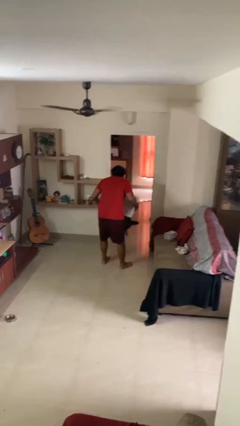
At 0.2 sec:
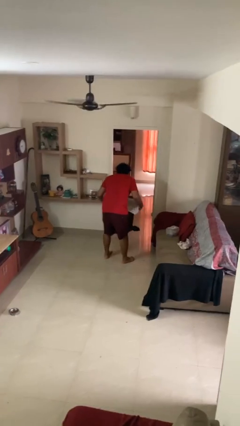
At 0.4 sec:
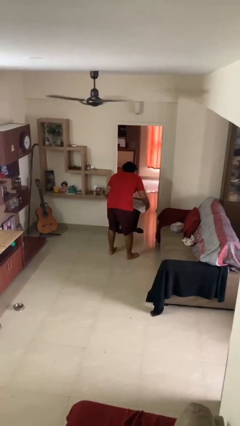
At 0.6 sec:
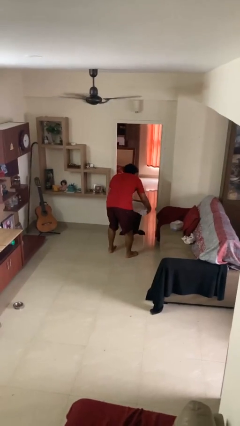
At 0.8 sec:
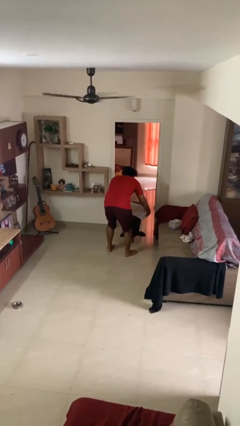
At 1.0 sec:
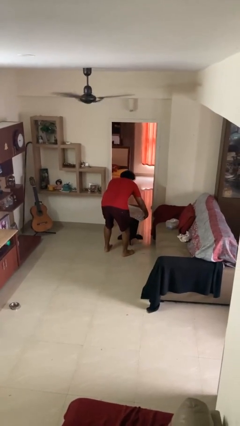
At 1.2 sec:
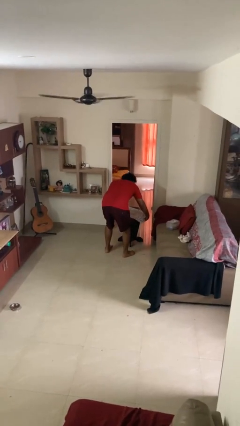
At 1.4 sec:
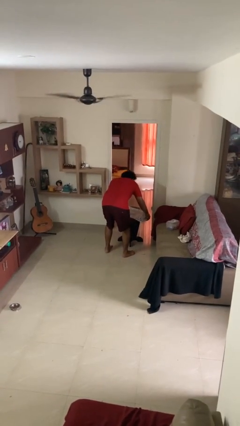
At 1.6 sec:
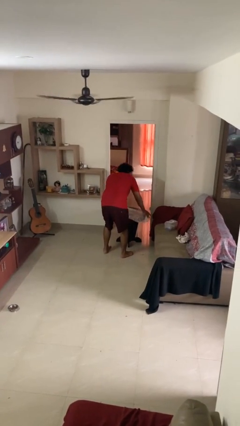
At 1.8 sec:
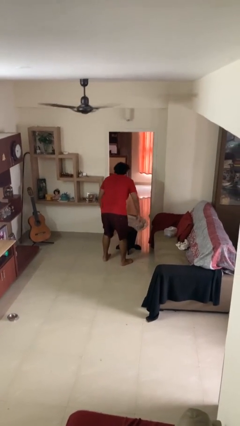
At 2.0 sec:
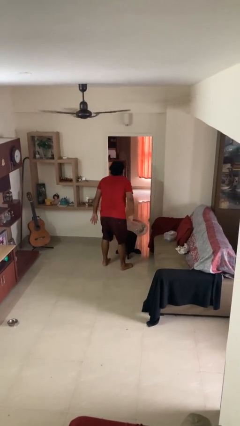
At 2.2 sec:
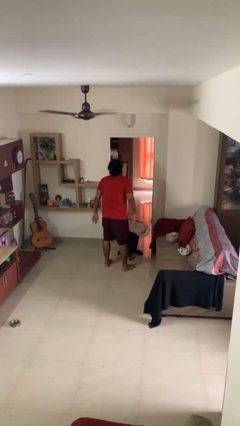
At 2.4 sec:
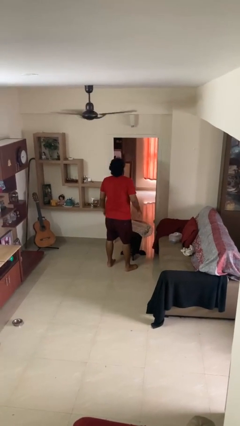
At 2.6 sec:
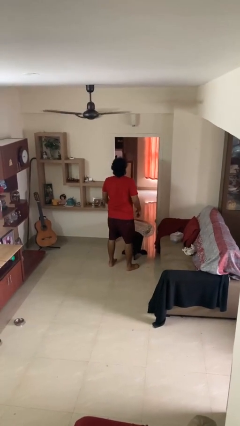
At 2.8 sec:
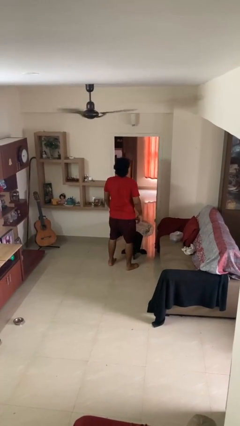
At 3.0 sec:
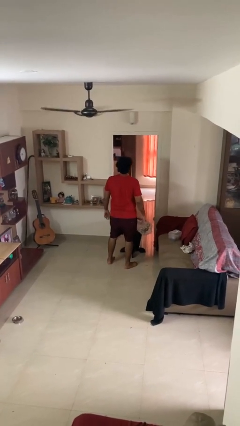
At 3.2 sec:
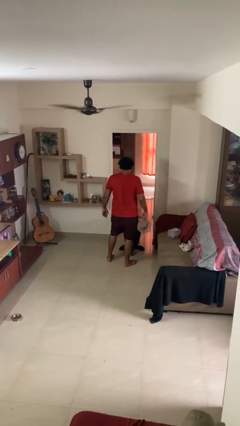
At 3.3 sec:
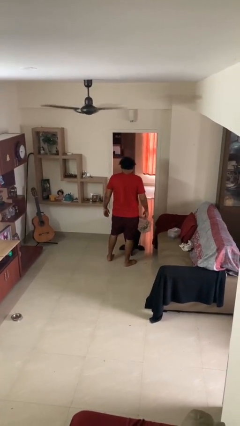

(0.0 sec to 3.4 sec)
person puts down object on floor

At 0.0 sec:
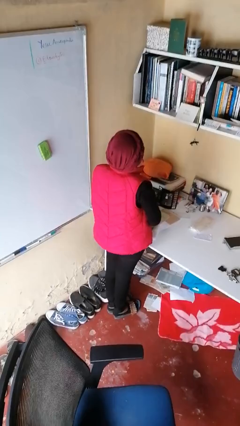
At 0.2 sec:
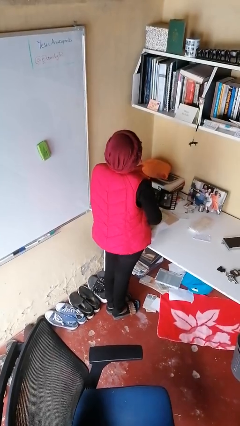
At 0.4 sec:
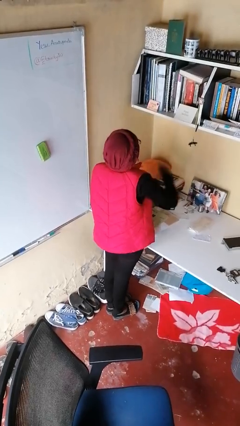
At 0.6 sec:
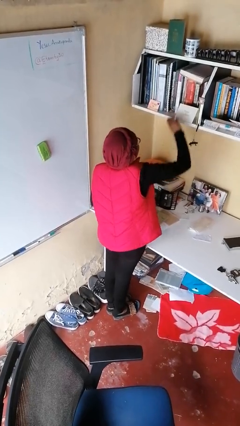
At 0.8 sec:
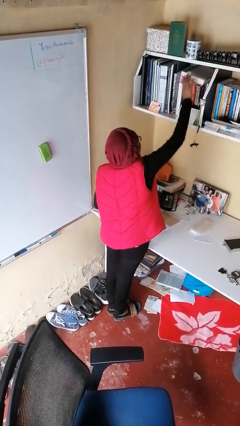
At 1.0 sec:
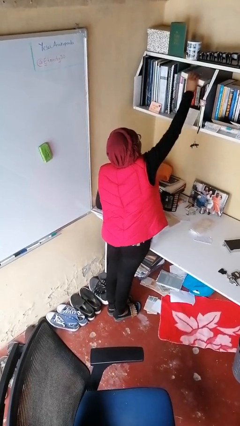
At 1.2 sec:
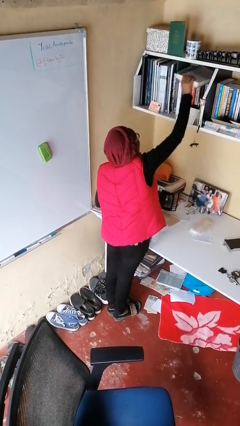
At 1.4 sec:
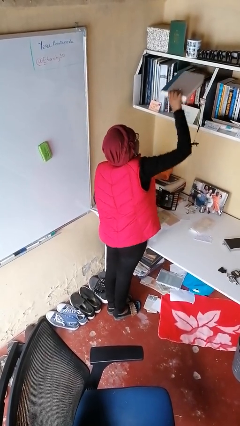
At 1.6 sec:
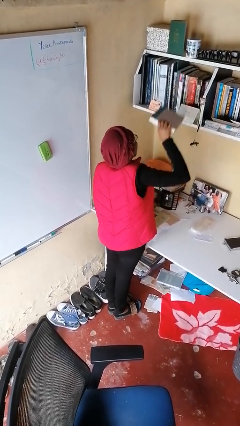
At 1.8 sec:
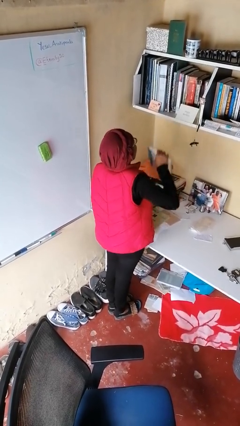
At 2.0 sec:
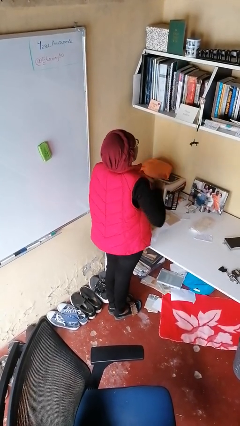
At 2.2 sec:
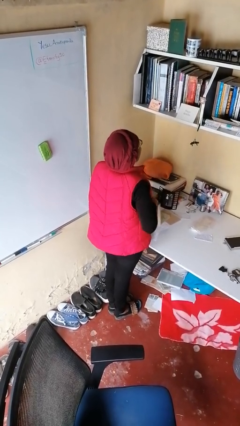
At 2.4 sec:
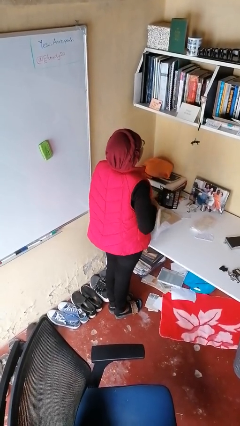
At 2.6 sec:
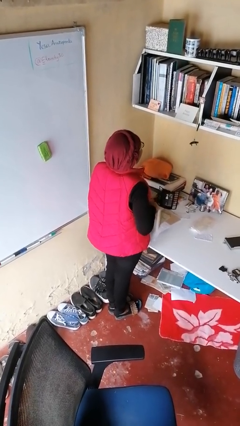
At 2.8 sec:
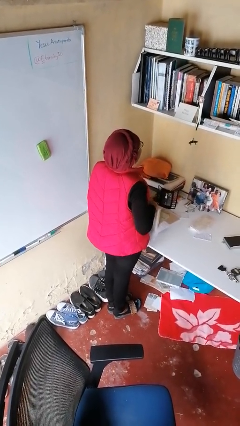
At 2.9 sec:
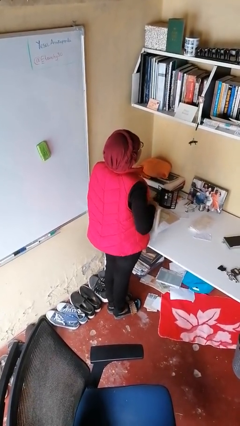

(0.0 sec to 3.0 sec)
person picks up object from shelf

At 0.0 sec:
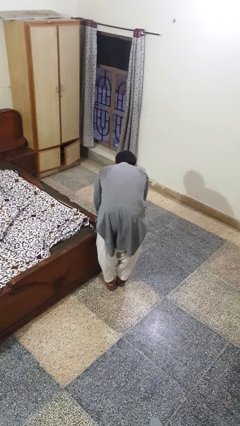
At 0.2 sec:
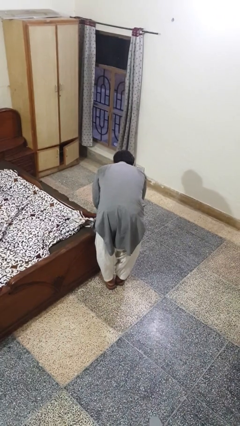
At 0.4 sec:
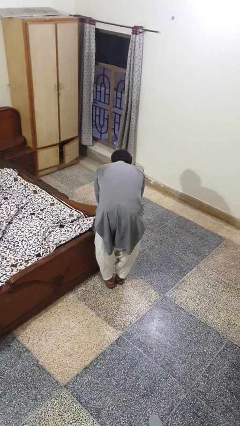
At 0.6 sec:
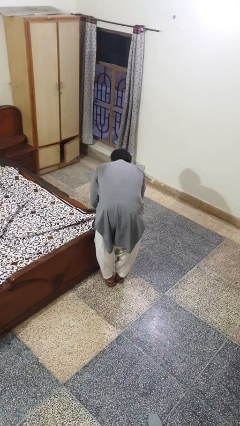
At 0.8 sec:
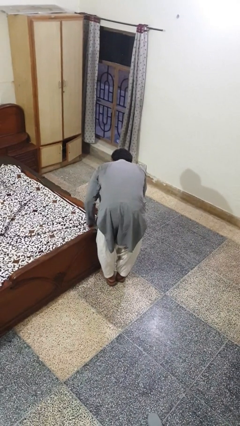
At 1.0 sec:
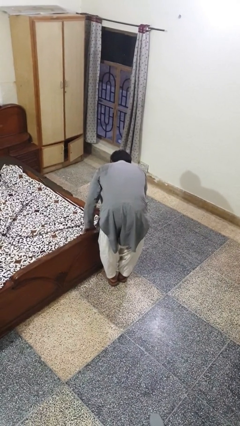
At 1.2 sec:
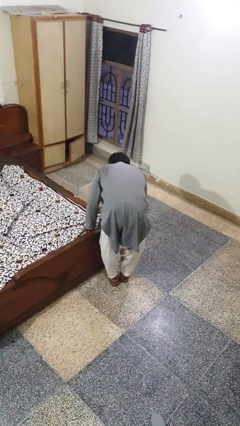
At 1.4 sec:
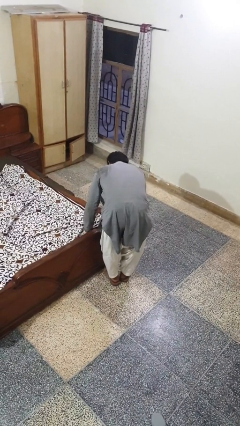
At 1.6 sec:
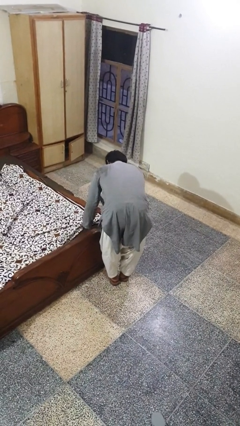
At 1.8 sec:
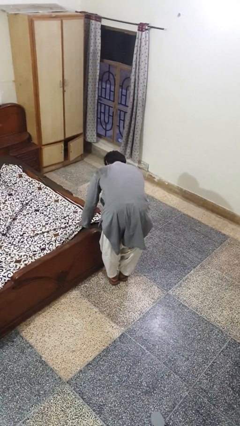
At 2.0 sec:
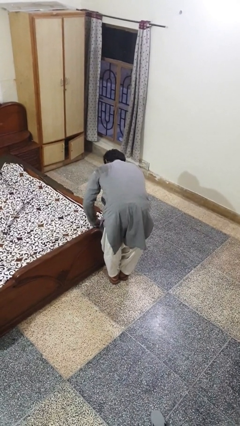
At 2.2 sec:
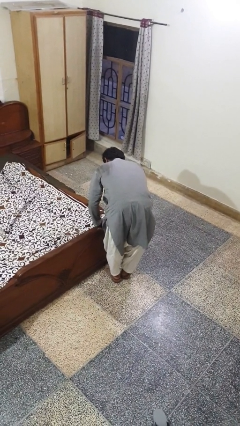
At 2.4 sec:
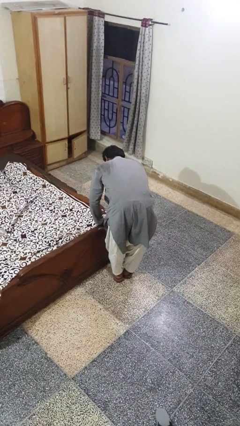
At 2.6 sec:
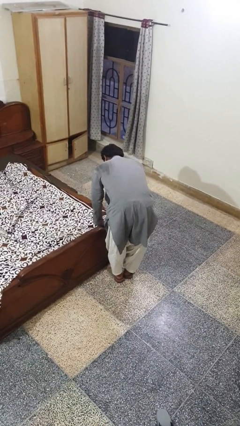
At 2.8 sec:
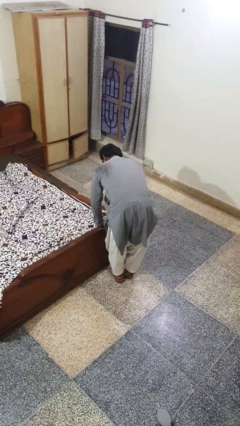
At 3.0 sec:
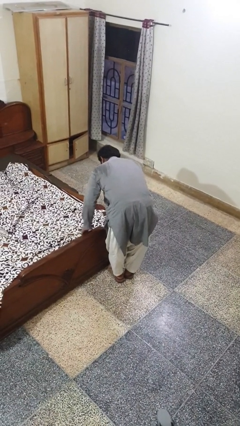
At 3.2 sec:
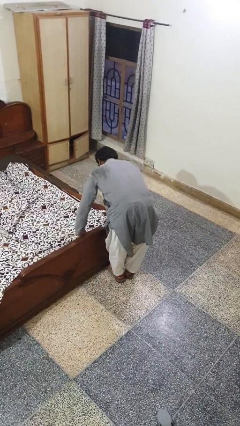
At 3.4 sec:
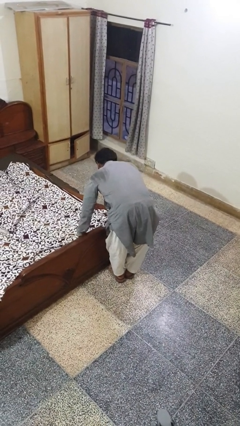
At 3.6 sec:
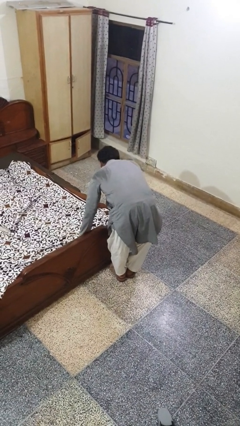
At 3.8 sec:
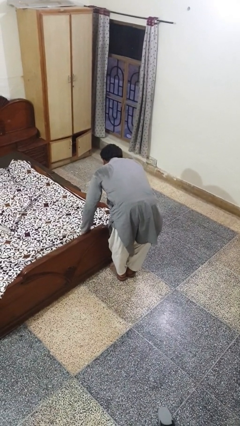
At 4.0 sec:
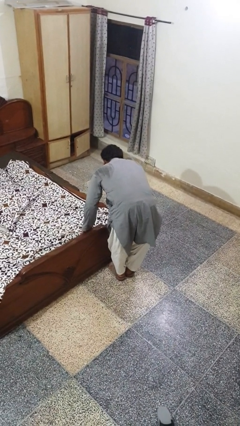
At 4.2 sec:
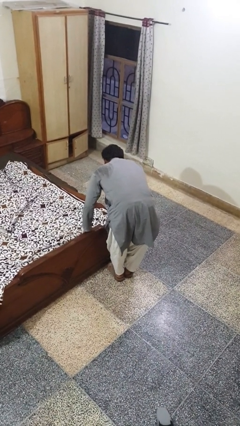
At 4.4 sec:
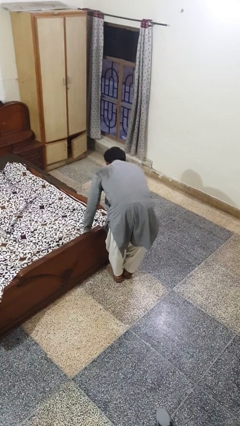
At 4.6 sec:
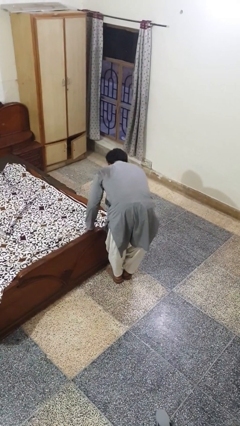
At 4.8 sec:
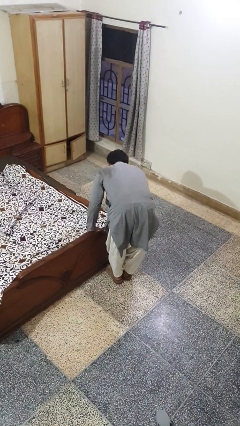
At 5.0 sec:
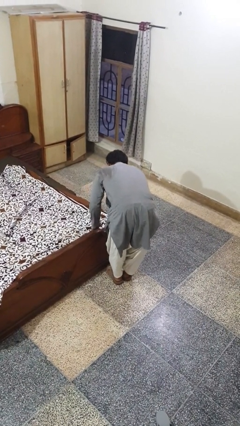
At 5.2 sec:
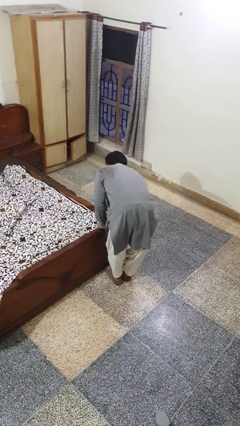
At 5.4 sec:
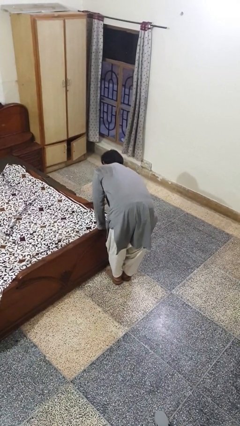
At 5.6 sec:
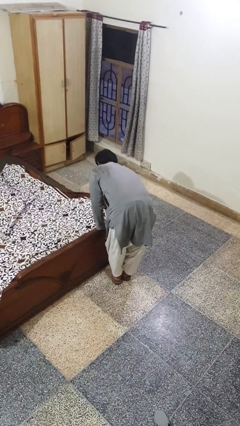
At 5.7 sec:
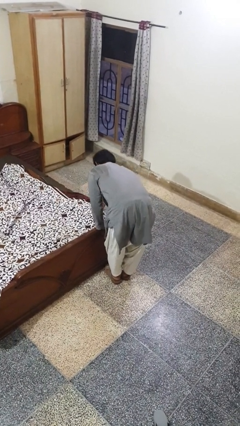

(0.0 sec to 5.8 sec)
person makes bed

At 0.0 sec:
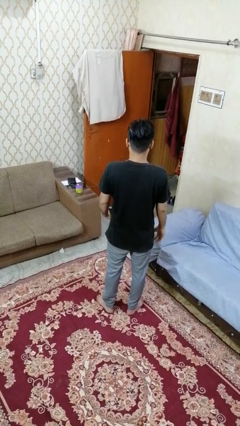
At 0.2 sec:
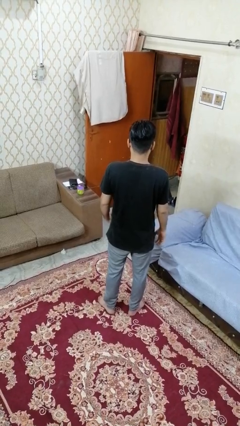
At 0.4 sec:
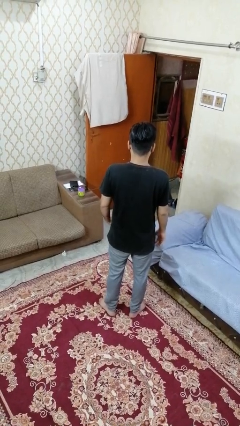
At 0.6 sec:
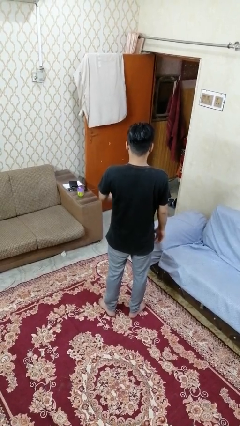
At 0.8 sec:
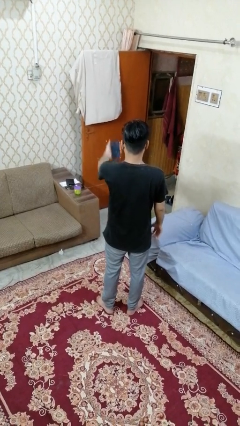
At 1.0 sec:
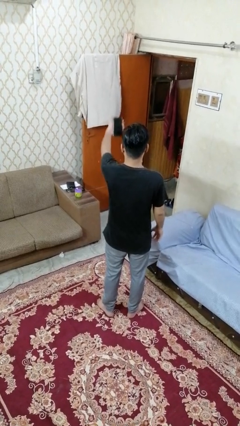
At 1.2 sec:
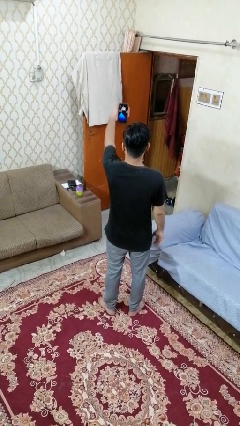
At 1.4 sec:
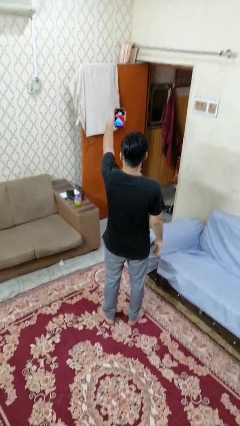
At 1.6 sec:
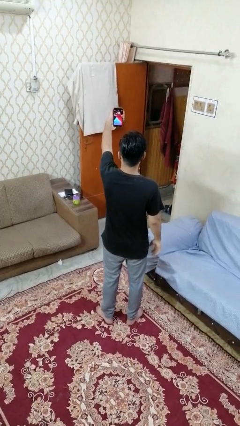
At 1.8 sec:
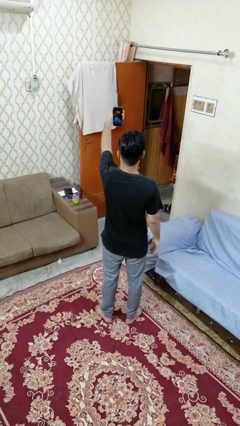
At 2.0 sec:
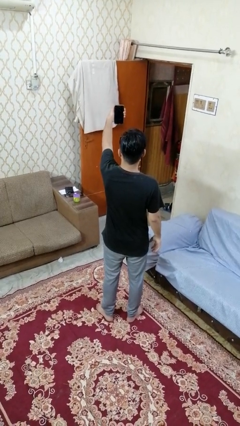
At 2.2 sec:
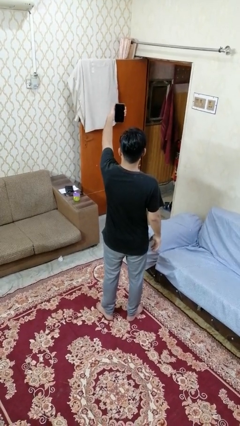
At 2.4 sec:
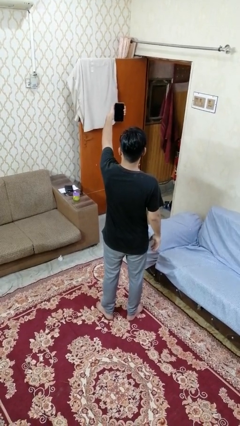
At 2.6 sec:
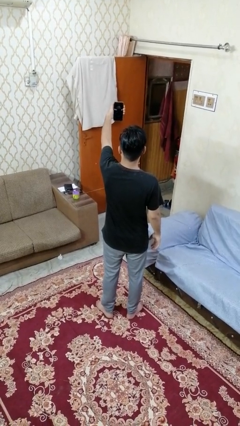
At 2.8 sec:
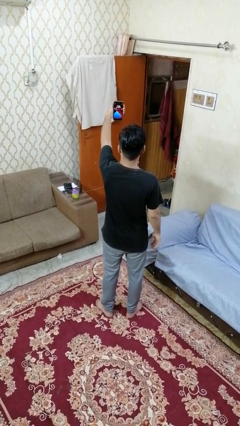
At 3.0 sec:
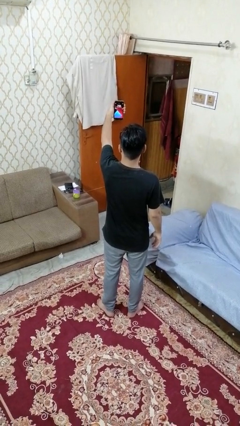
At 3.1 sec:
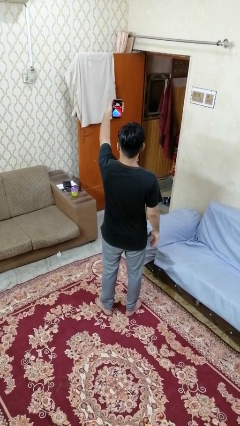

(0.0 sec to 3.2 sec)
person takes selfie

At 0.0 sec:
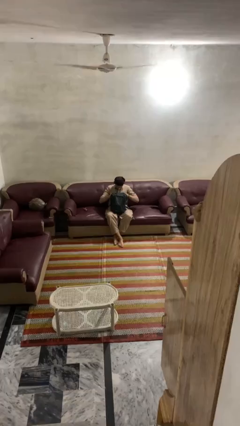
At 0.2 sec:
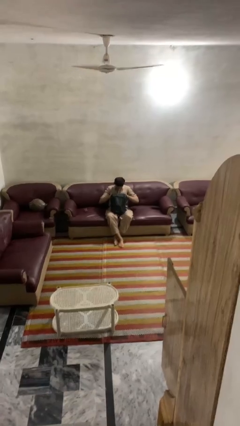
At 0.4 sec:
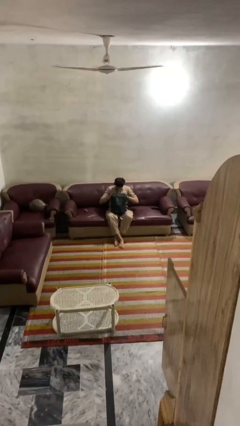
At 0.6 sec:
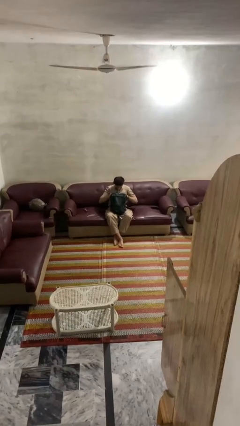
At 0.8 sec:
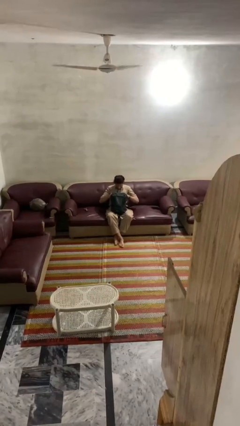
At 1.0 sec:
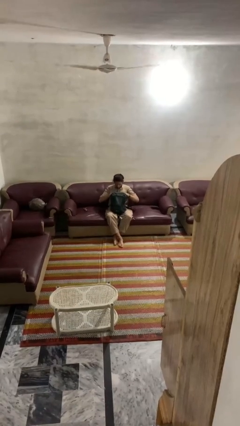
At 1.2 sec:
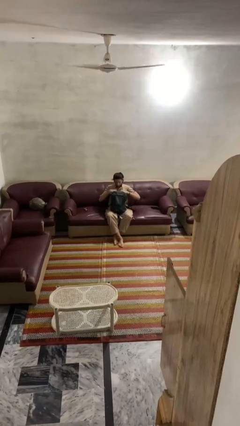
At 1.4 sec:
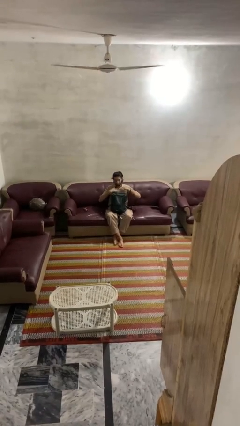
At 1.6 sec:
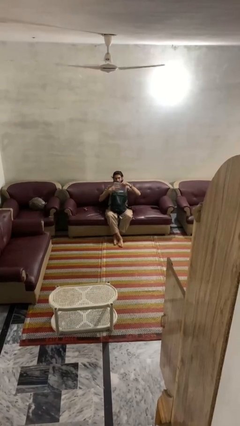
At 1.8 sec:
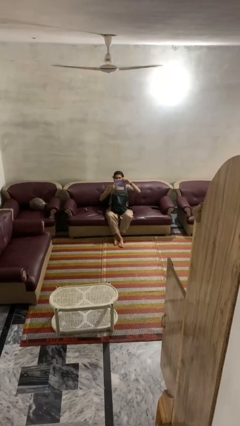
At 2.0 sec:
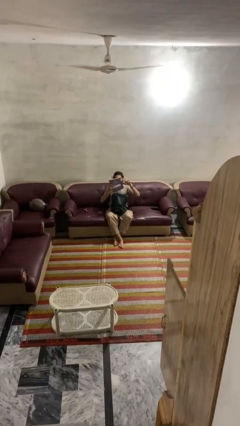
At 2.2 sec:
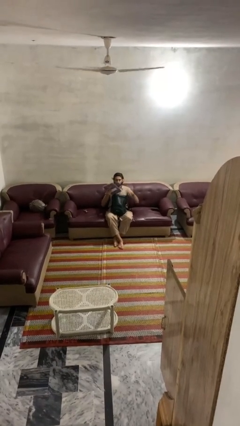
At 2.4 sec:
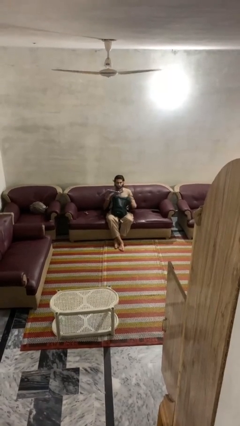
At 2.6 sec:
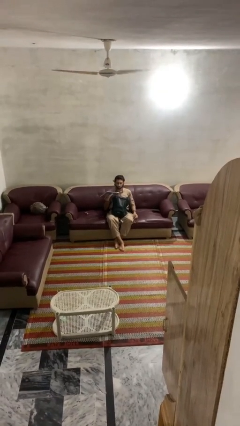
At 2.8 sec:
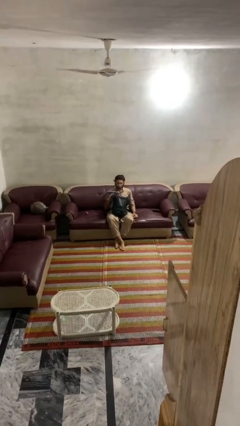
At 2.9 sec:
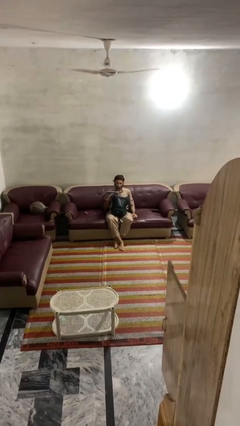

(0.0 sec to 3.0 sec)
person takes object from backpack
